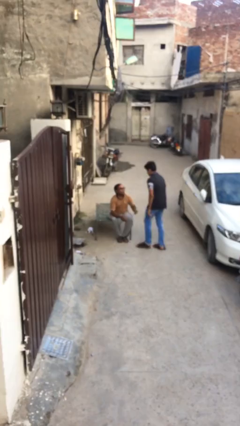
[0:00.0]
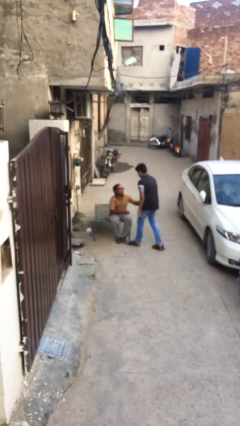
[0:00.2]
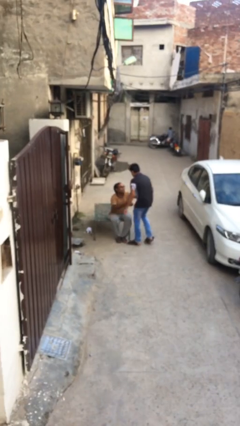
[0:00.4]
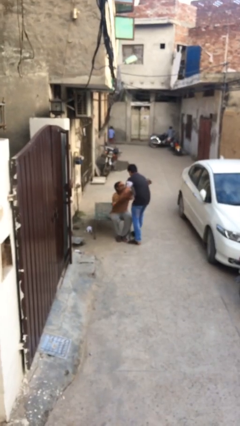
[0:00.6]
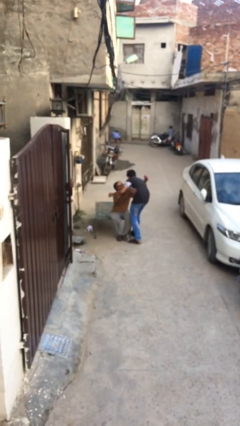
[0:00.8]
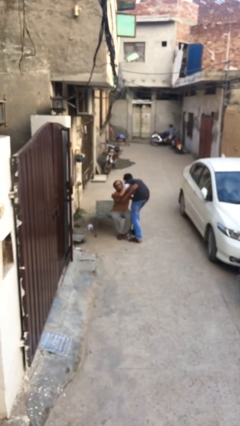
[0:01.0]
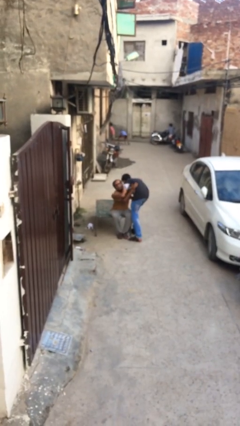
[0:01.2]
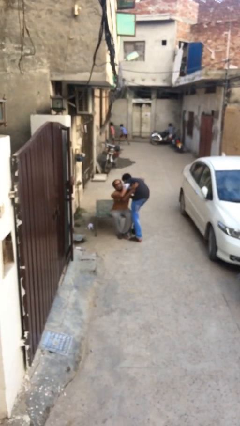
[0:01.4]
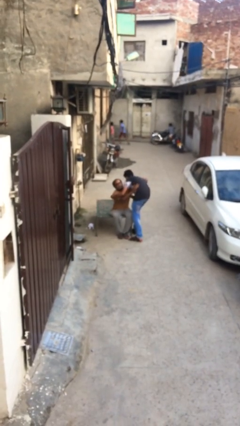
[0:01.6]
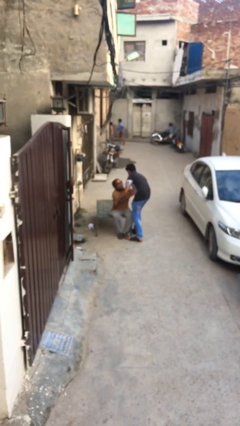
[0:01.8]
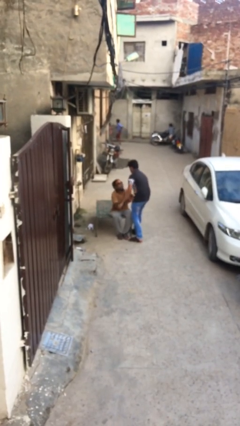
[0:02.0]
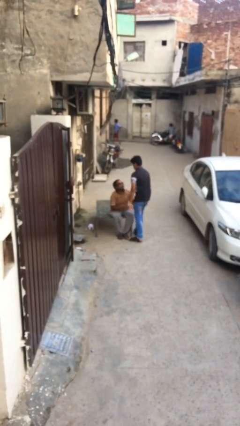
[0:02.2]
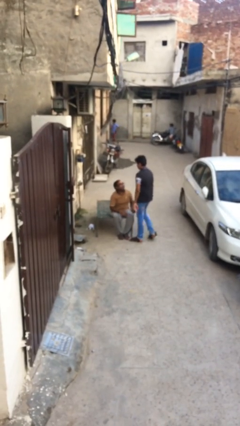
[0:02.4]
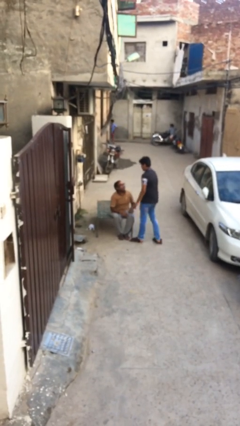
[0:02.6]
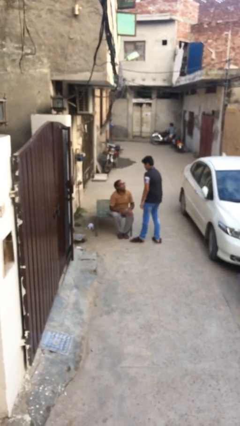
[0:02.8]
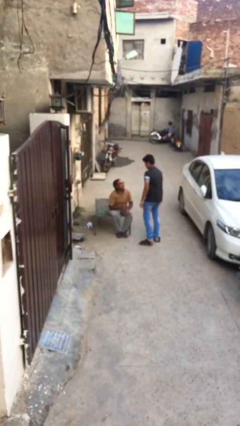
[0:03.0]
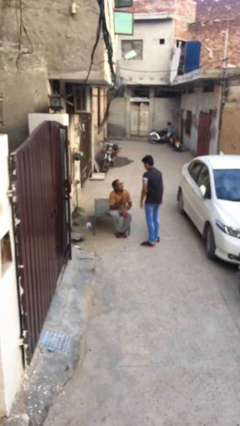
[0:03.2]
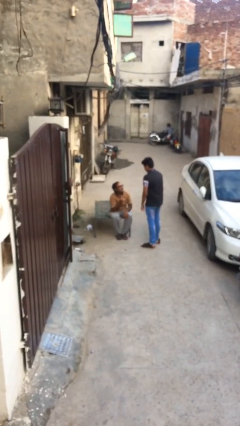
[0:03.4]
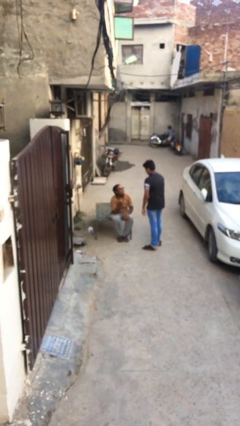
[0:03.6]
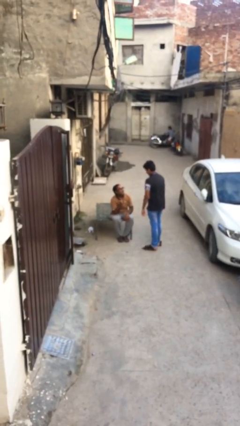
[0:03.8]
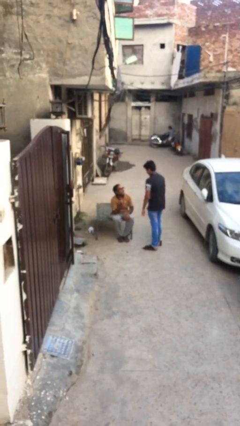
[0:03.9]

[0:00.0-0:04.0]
person embraces person

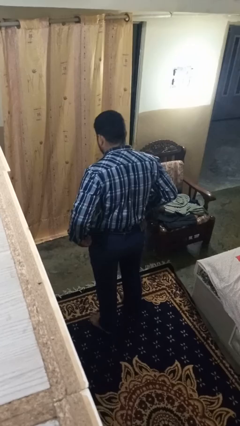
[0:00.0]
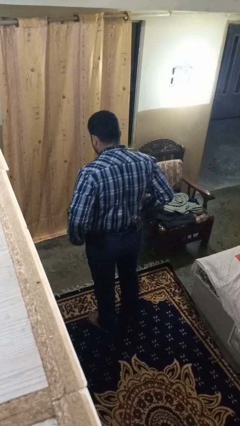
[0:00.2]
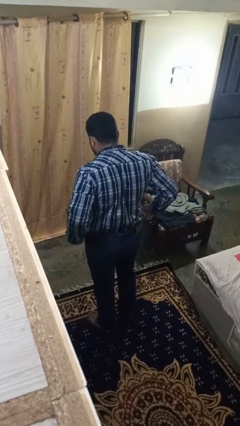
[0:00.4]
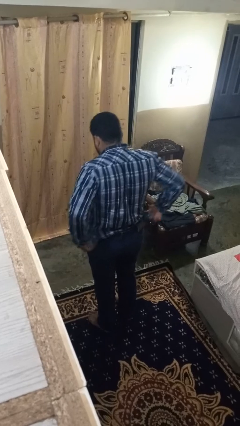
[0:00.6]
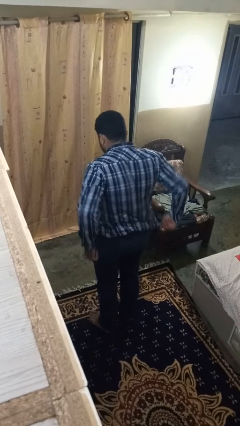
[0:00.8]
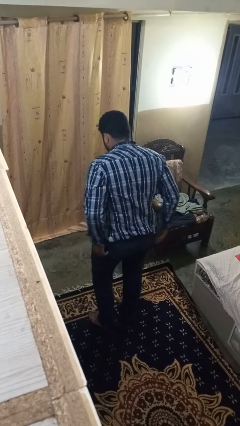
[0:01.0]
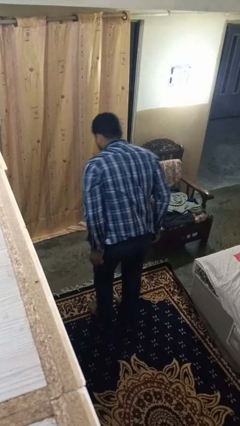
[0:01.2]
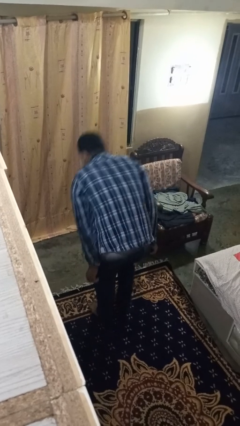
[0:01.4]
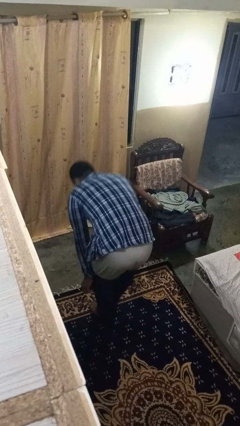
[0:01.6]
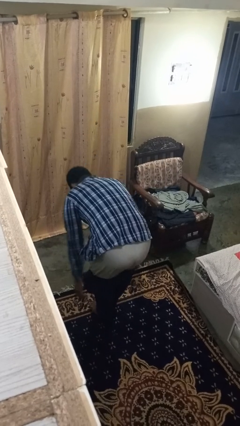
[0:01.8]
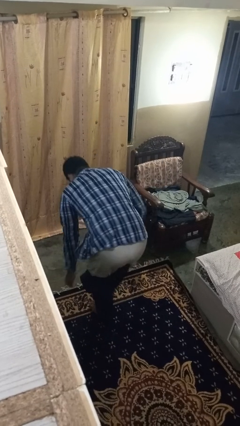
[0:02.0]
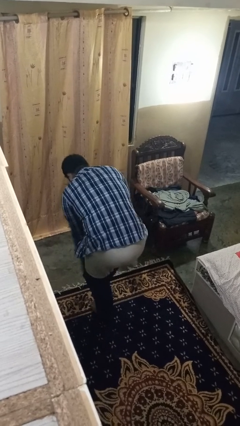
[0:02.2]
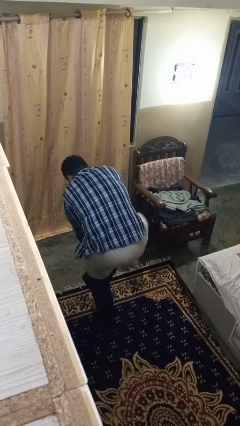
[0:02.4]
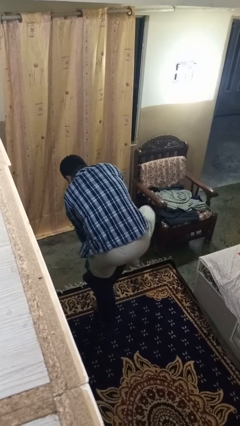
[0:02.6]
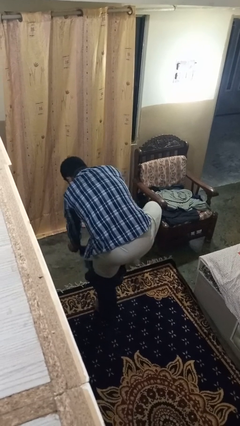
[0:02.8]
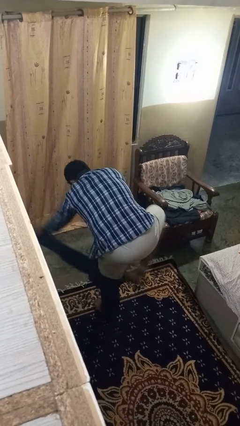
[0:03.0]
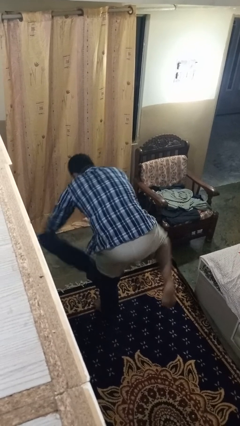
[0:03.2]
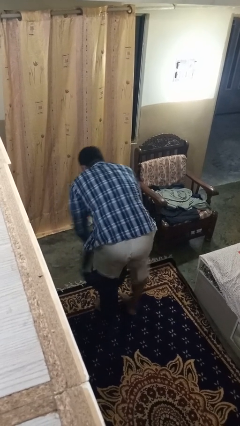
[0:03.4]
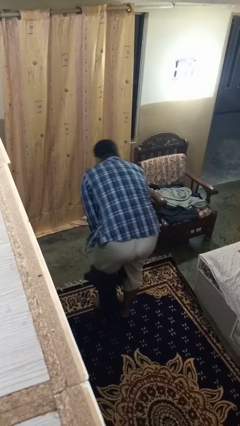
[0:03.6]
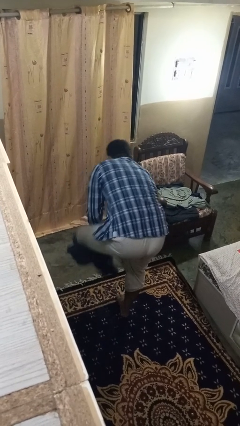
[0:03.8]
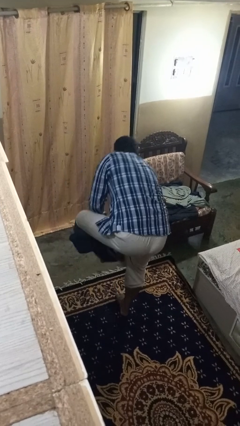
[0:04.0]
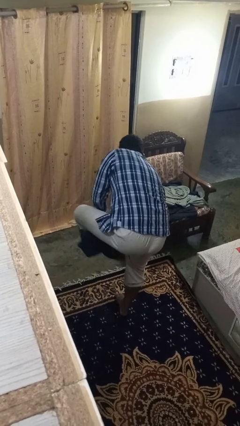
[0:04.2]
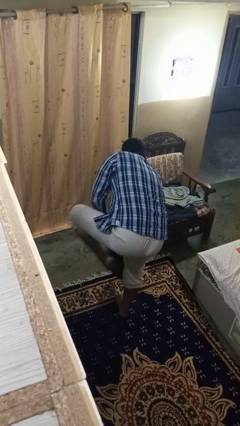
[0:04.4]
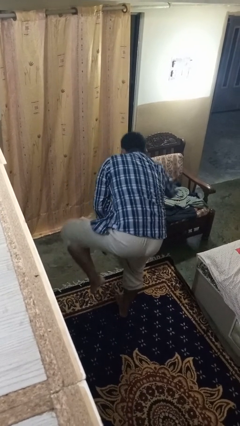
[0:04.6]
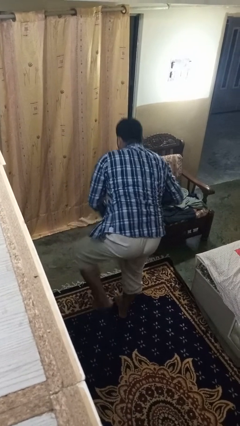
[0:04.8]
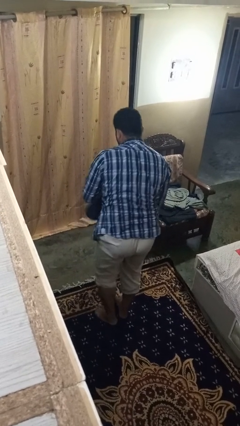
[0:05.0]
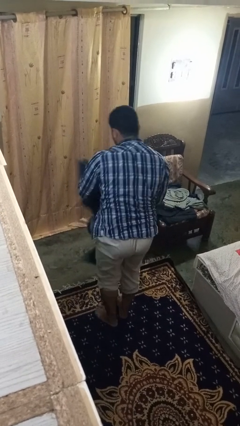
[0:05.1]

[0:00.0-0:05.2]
person takes off pants

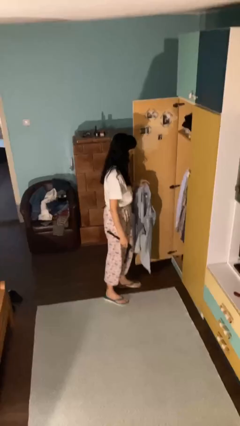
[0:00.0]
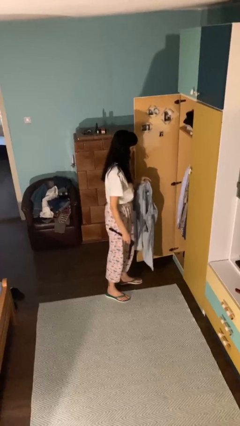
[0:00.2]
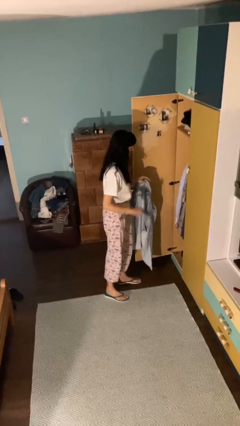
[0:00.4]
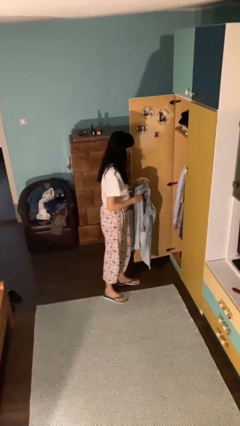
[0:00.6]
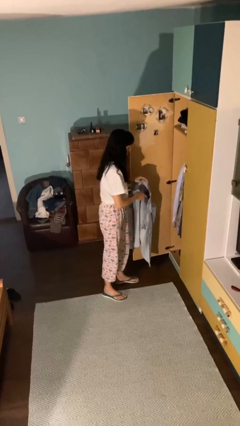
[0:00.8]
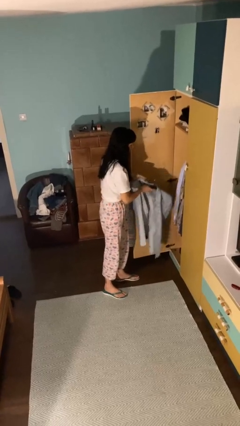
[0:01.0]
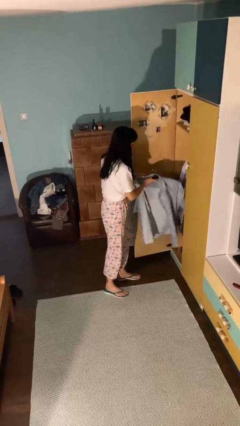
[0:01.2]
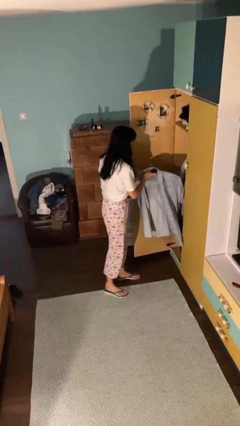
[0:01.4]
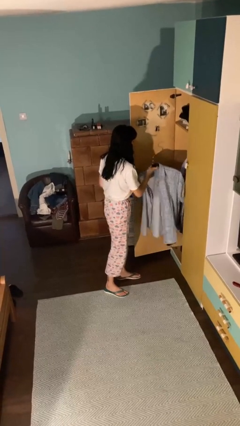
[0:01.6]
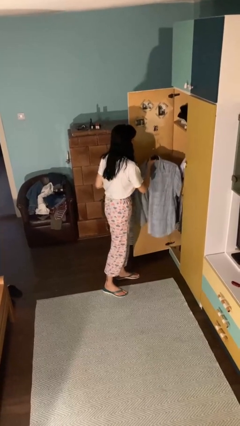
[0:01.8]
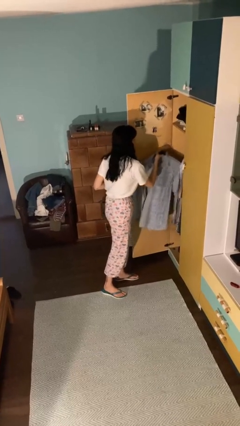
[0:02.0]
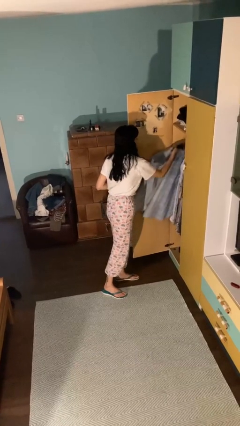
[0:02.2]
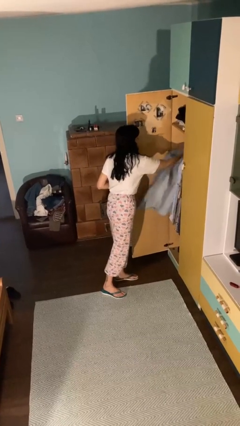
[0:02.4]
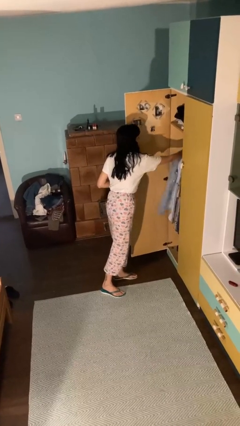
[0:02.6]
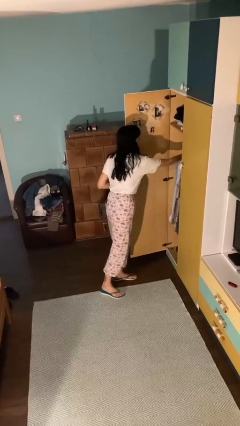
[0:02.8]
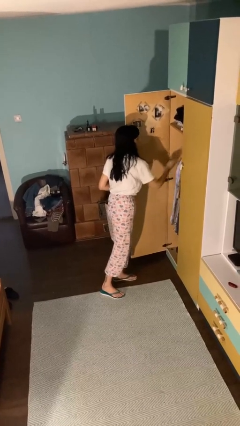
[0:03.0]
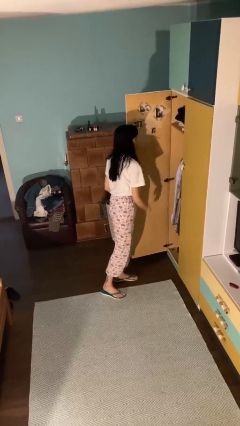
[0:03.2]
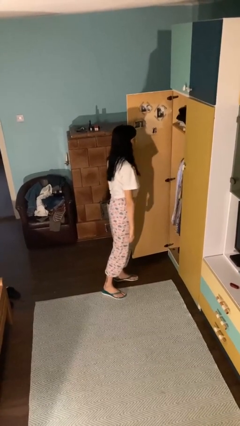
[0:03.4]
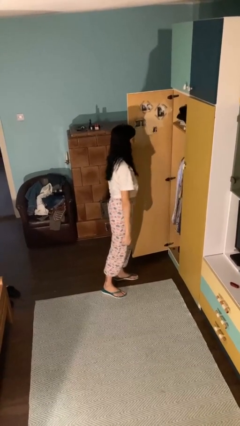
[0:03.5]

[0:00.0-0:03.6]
person puts clothes into closet

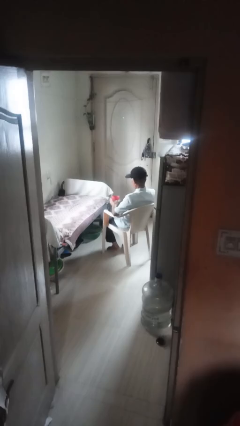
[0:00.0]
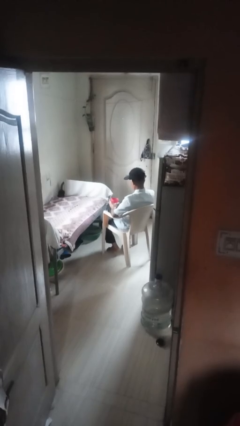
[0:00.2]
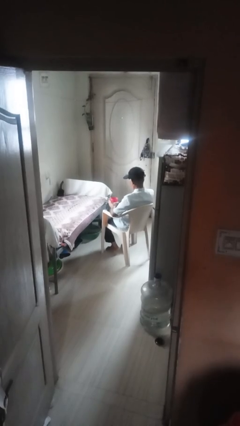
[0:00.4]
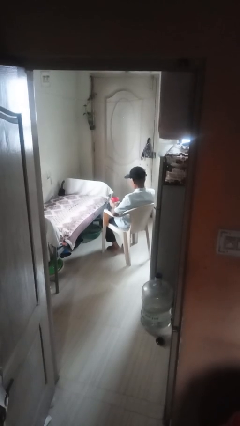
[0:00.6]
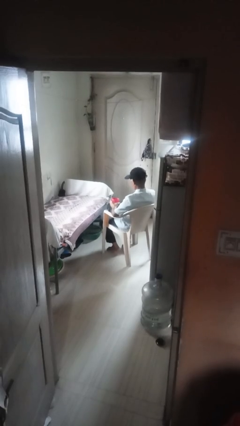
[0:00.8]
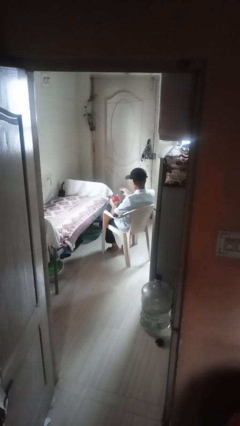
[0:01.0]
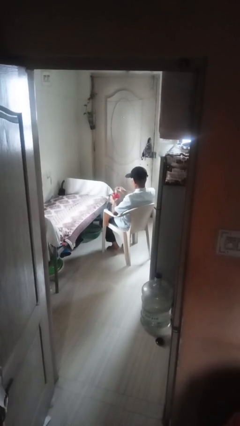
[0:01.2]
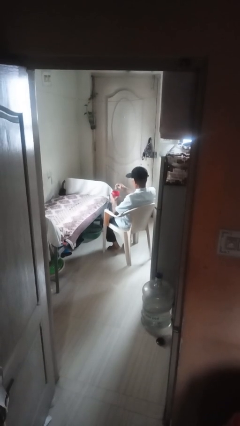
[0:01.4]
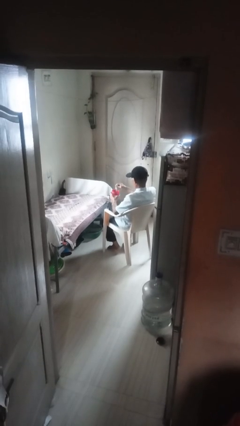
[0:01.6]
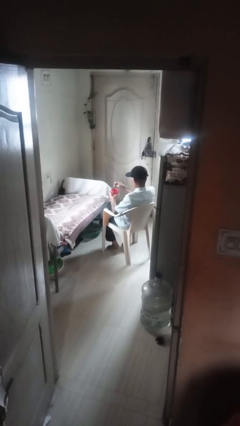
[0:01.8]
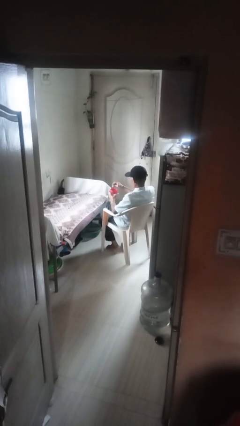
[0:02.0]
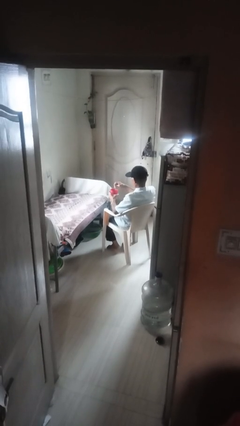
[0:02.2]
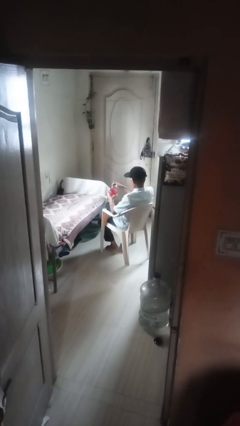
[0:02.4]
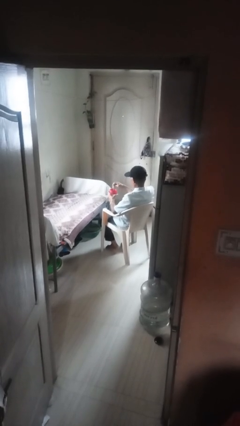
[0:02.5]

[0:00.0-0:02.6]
person stirs mug

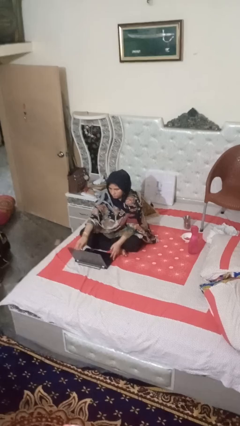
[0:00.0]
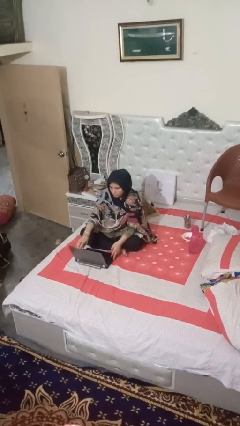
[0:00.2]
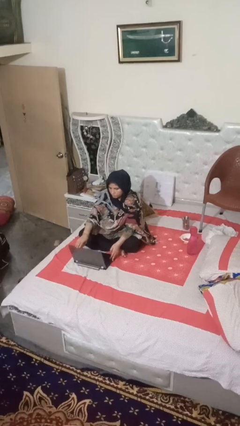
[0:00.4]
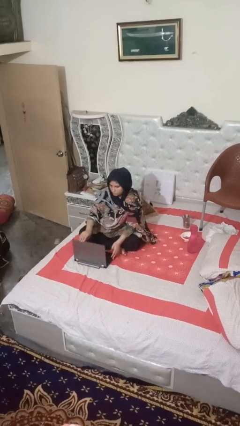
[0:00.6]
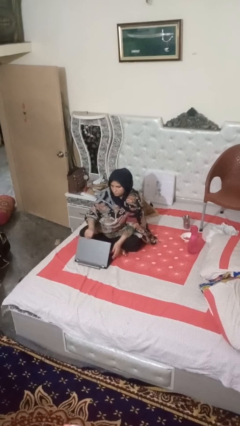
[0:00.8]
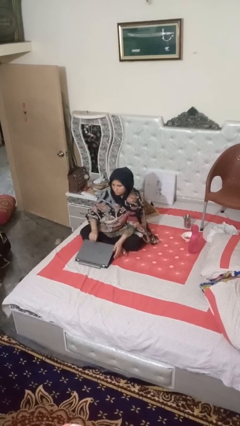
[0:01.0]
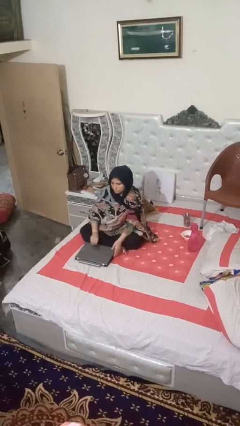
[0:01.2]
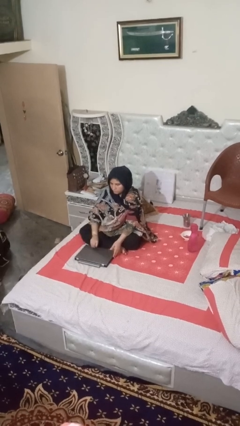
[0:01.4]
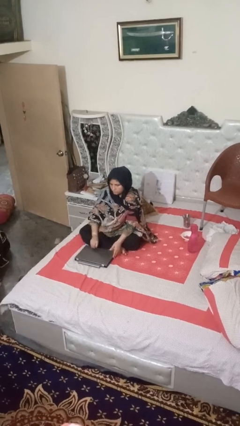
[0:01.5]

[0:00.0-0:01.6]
person closes laptop

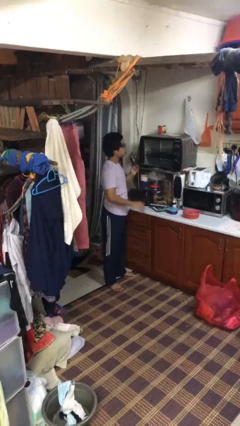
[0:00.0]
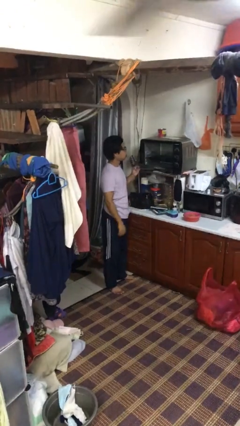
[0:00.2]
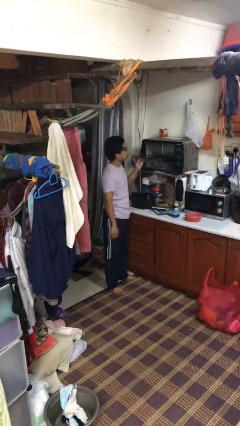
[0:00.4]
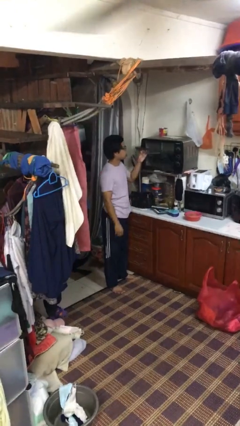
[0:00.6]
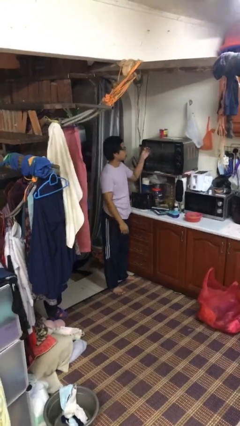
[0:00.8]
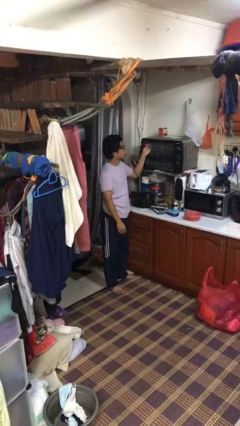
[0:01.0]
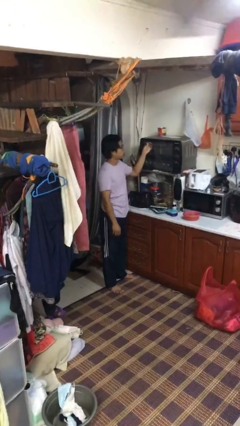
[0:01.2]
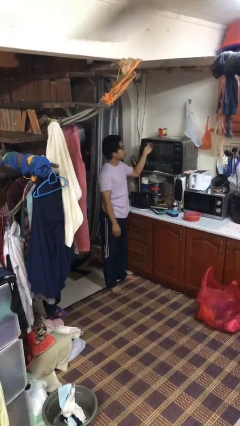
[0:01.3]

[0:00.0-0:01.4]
person closes oven door
